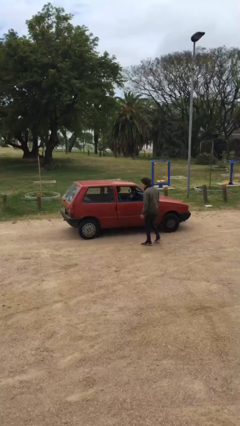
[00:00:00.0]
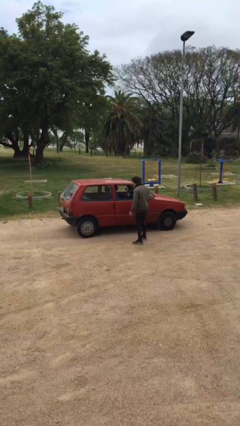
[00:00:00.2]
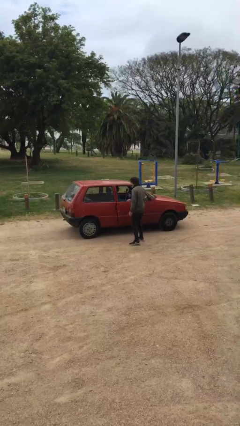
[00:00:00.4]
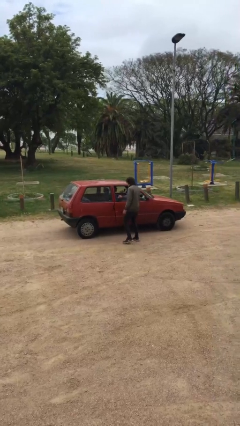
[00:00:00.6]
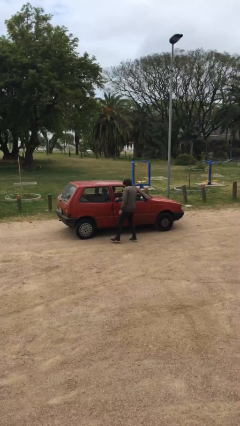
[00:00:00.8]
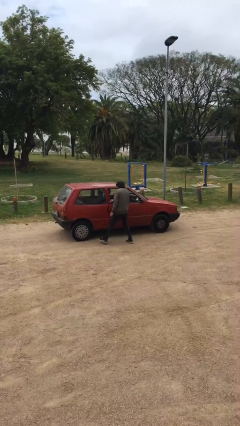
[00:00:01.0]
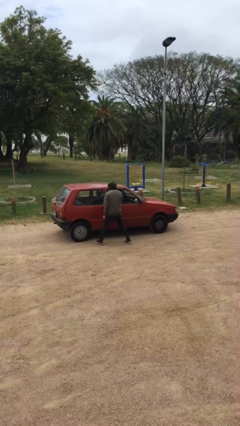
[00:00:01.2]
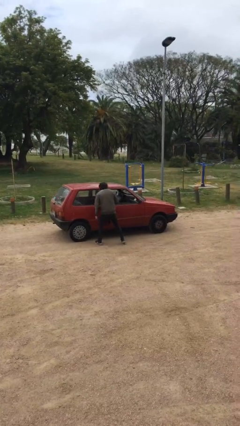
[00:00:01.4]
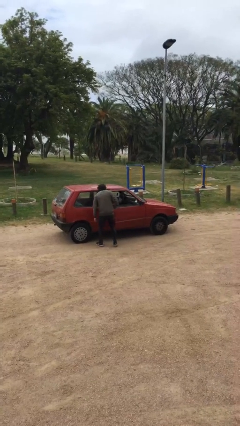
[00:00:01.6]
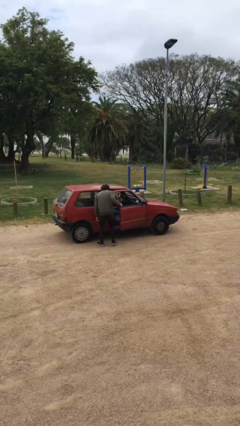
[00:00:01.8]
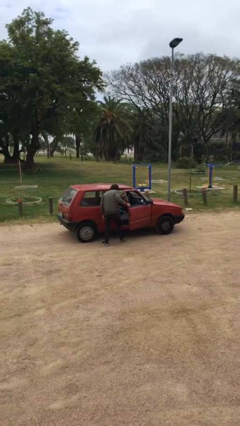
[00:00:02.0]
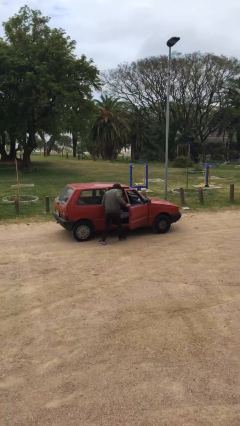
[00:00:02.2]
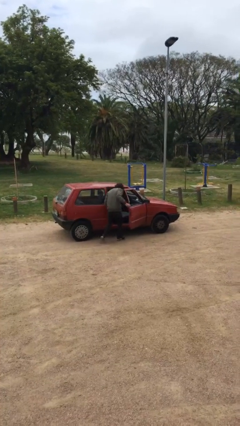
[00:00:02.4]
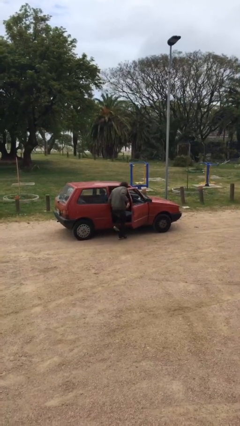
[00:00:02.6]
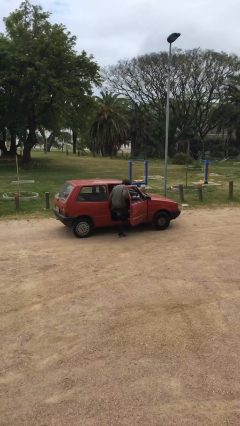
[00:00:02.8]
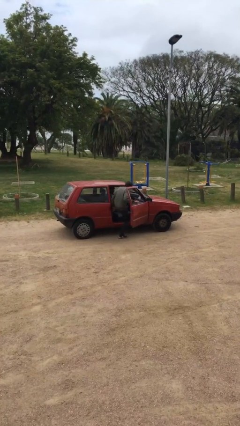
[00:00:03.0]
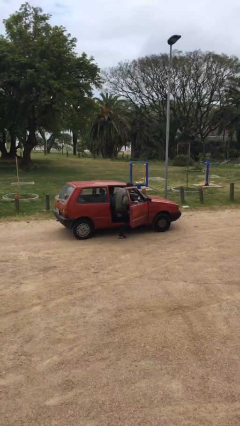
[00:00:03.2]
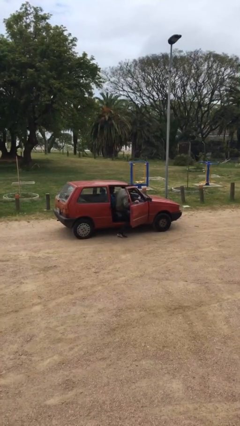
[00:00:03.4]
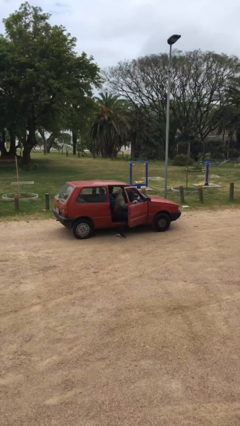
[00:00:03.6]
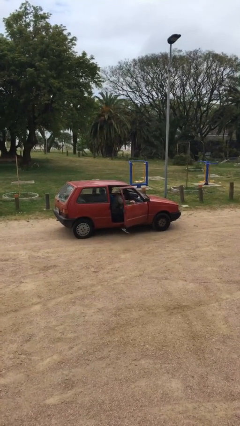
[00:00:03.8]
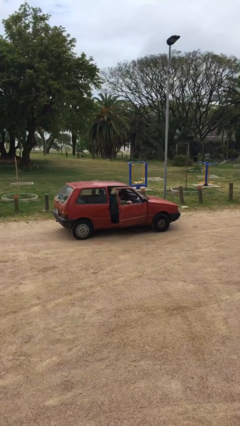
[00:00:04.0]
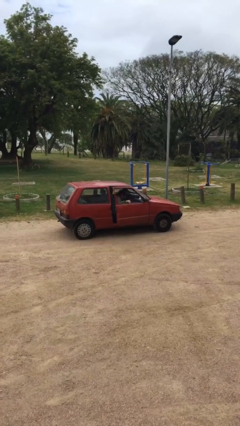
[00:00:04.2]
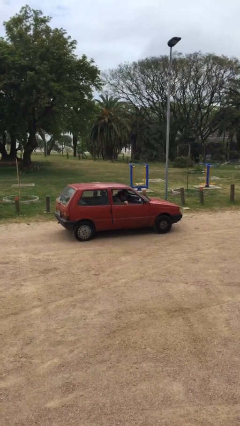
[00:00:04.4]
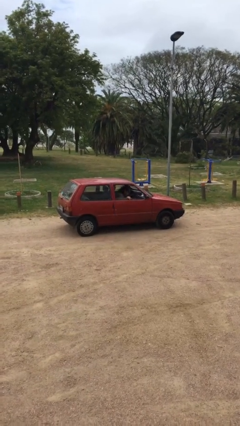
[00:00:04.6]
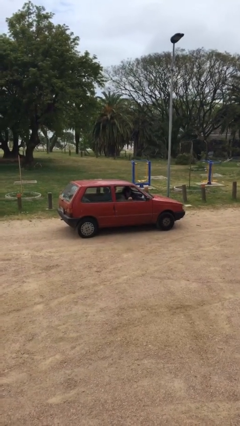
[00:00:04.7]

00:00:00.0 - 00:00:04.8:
car picks up person

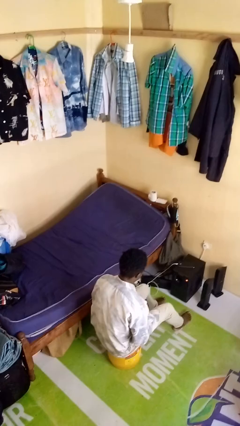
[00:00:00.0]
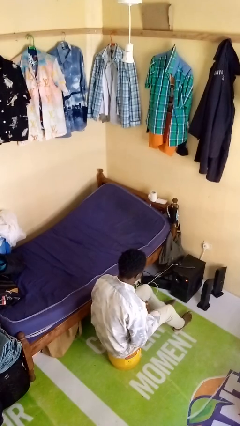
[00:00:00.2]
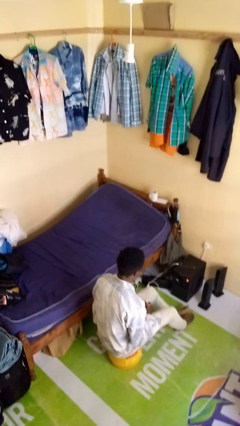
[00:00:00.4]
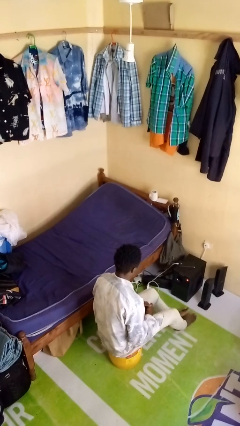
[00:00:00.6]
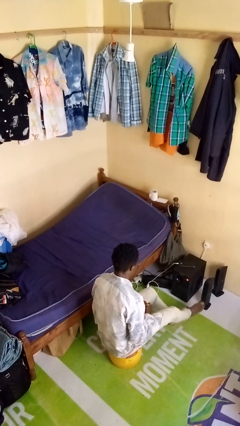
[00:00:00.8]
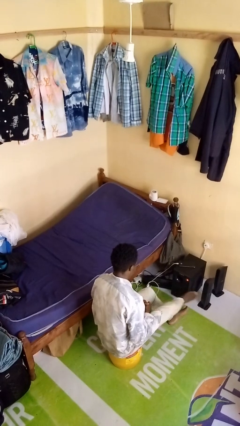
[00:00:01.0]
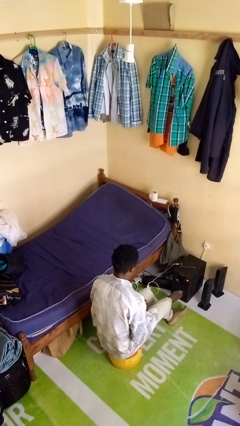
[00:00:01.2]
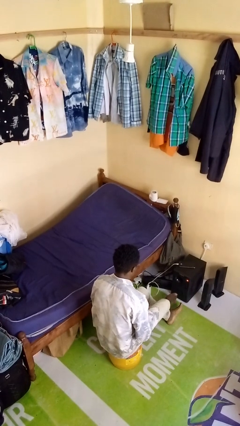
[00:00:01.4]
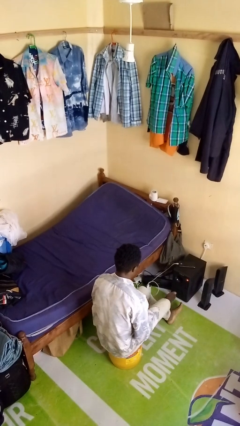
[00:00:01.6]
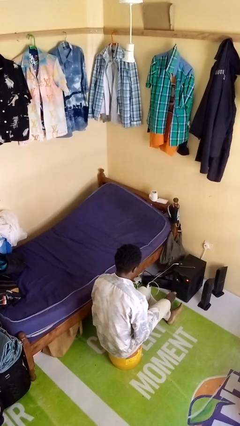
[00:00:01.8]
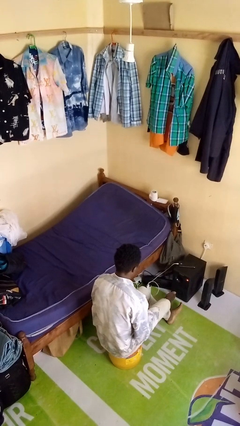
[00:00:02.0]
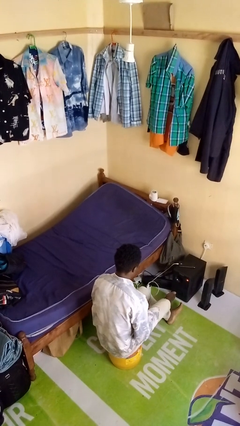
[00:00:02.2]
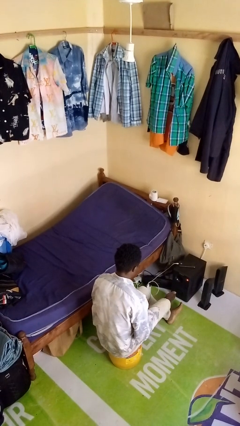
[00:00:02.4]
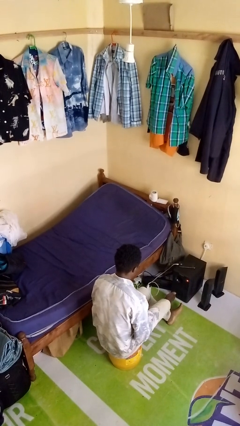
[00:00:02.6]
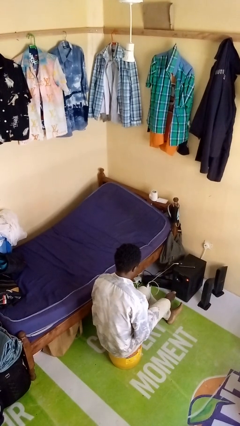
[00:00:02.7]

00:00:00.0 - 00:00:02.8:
person crosses legs

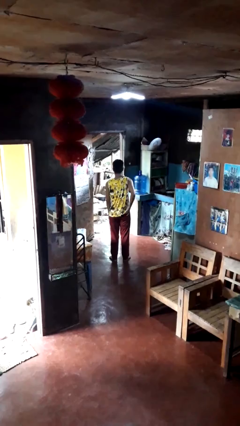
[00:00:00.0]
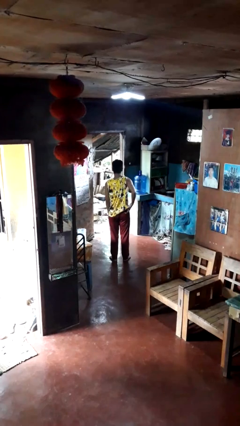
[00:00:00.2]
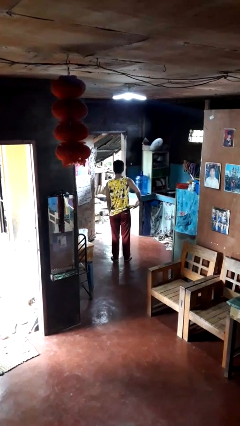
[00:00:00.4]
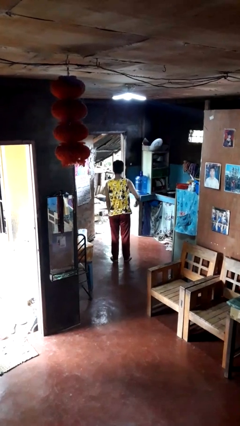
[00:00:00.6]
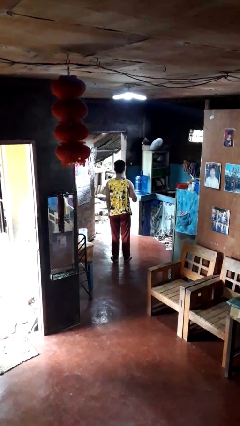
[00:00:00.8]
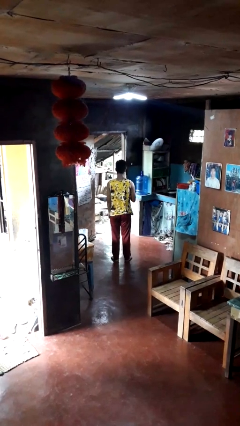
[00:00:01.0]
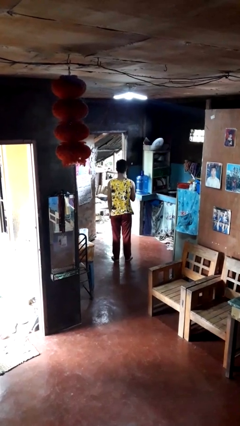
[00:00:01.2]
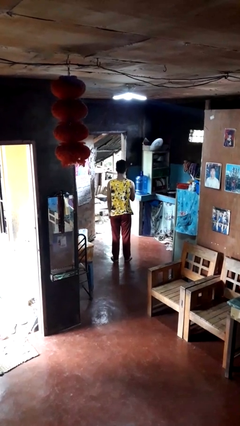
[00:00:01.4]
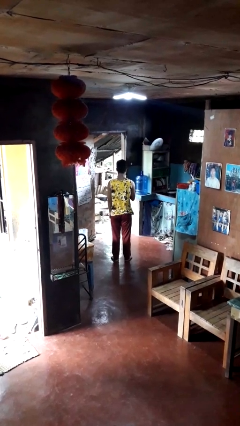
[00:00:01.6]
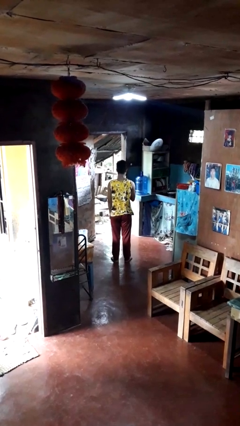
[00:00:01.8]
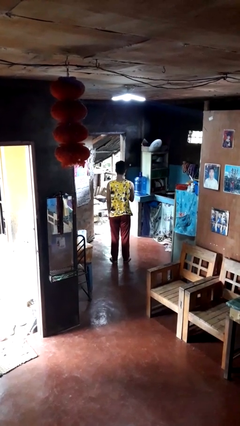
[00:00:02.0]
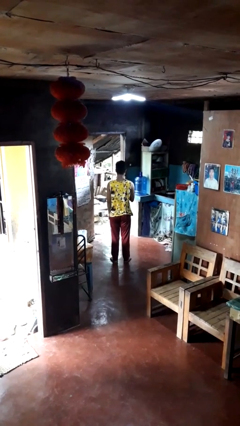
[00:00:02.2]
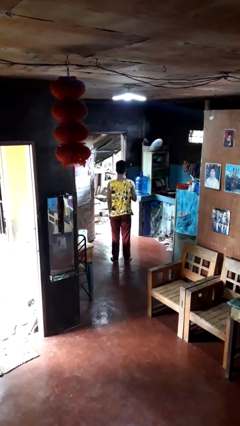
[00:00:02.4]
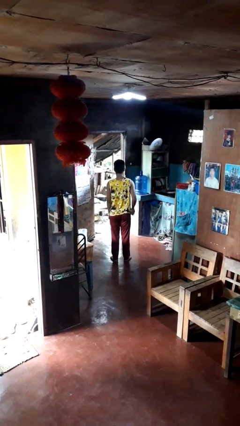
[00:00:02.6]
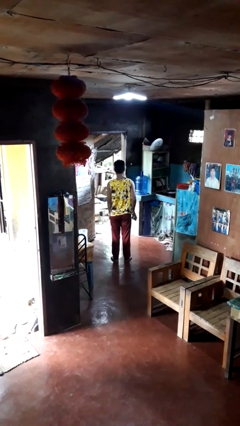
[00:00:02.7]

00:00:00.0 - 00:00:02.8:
person takes phone from pocket

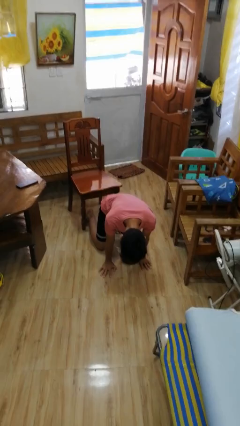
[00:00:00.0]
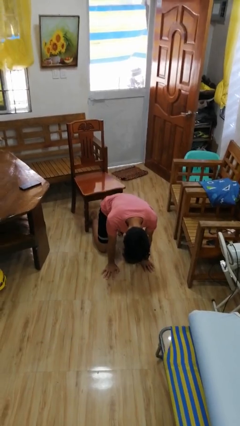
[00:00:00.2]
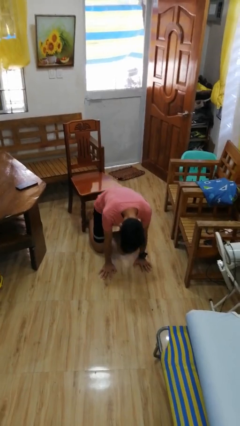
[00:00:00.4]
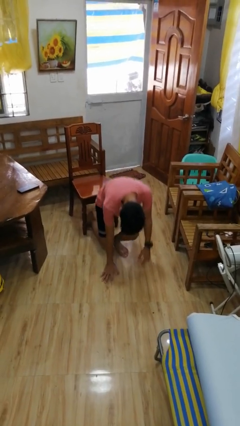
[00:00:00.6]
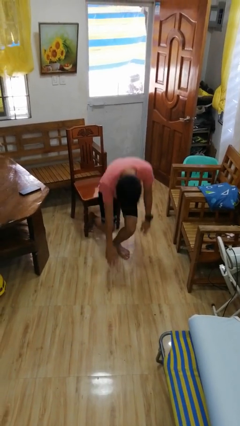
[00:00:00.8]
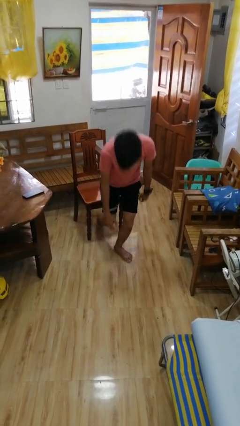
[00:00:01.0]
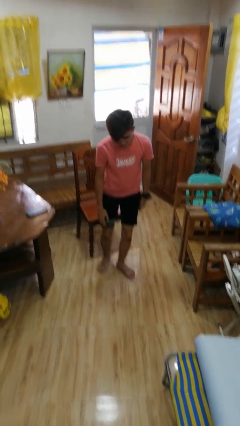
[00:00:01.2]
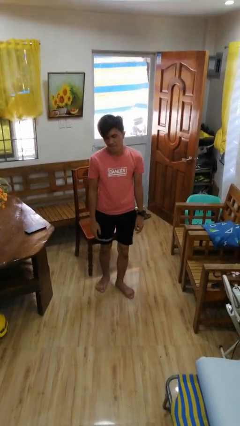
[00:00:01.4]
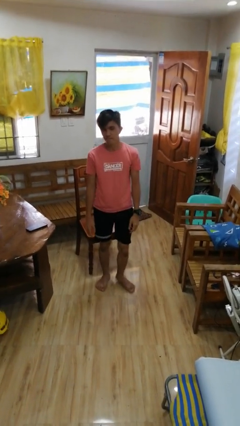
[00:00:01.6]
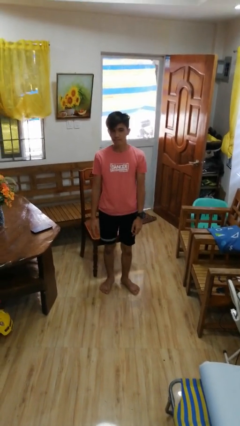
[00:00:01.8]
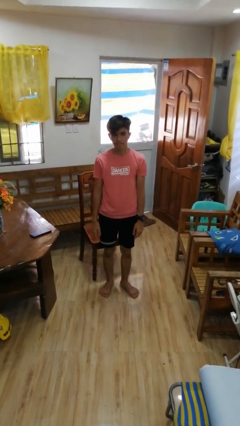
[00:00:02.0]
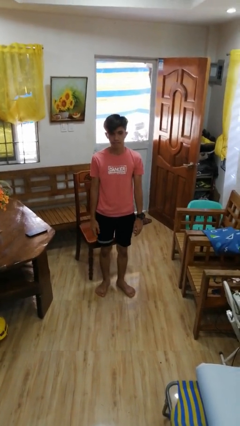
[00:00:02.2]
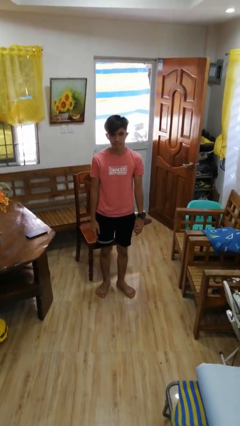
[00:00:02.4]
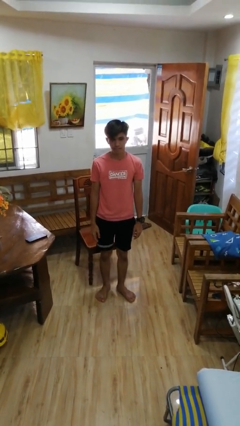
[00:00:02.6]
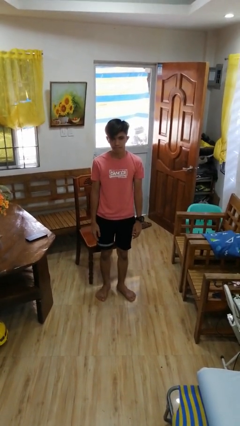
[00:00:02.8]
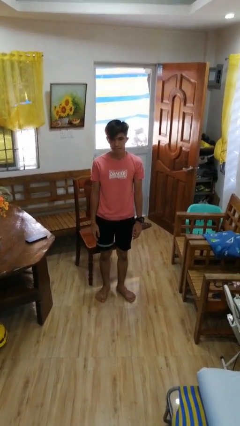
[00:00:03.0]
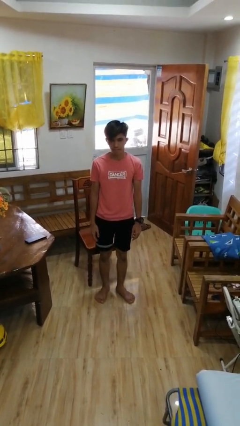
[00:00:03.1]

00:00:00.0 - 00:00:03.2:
person stands up from floor

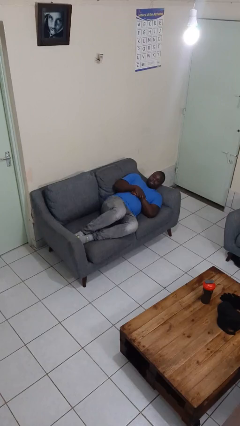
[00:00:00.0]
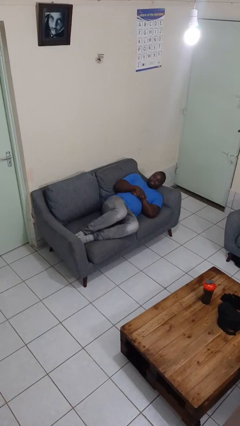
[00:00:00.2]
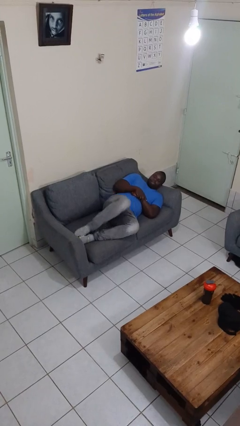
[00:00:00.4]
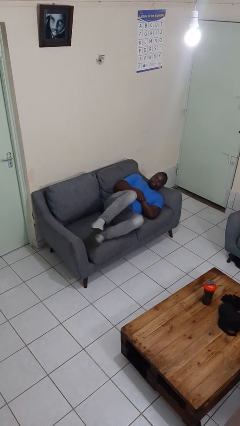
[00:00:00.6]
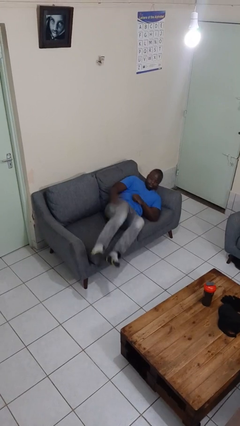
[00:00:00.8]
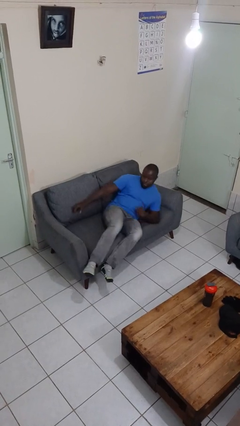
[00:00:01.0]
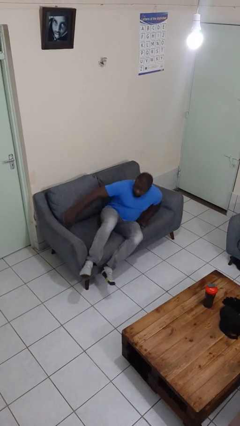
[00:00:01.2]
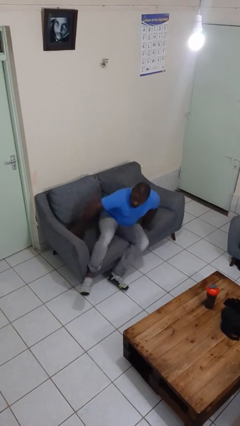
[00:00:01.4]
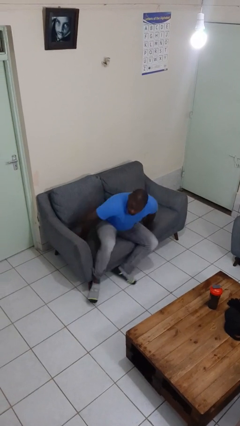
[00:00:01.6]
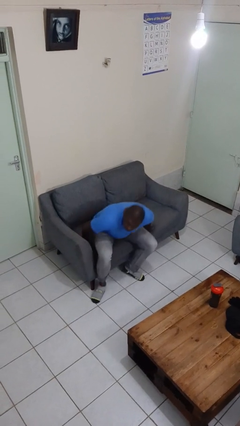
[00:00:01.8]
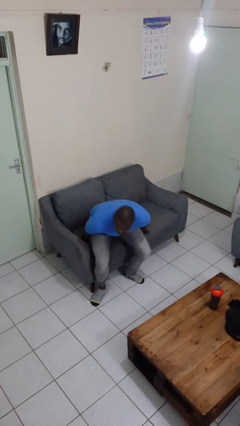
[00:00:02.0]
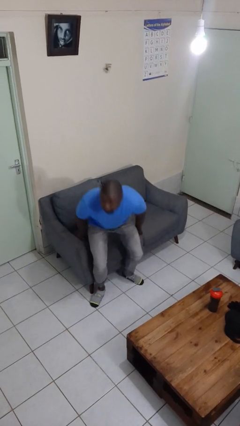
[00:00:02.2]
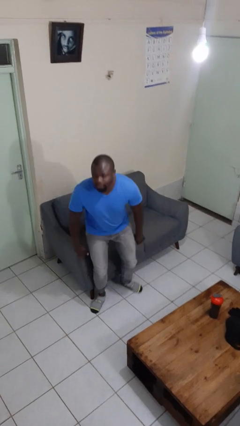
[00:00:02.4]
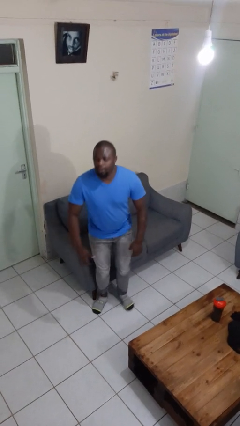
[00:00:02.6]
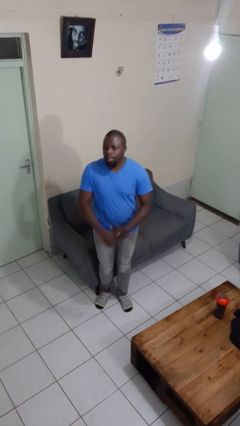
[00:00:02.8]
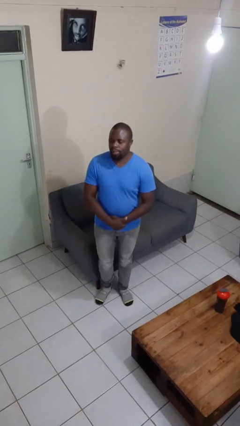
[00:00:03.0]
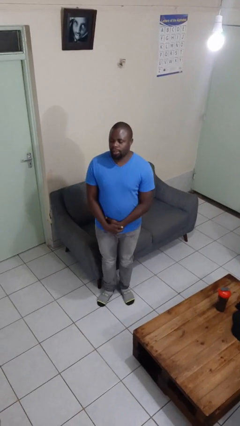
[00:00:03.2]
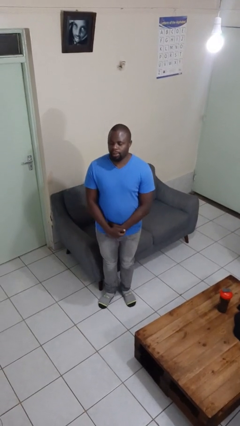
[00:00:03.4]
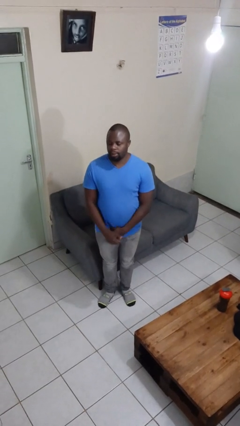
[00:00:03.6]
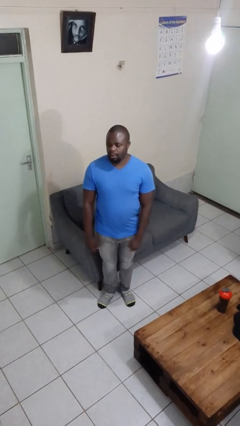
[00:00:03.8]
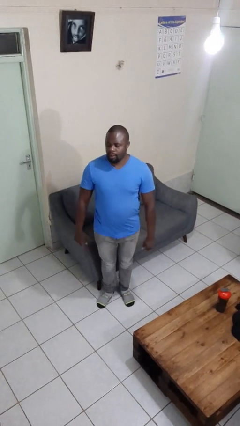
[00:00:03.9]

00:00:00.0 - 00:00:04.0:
person stands up
